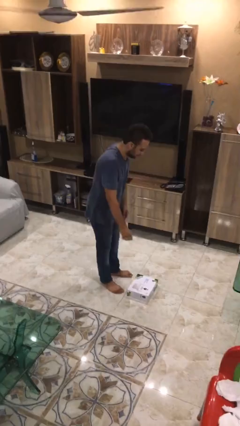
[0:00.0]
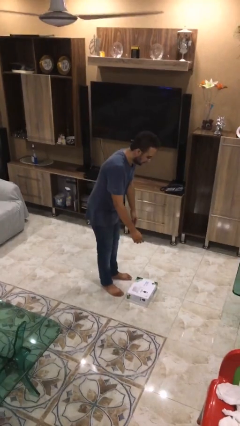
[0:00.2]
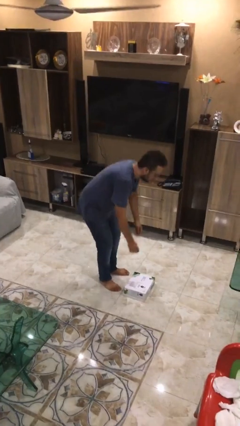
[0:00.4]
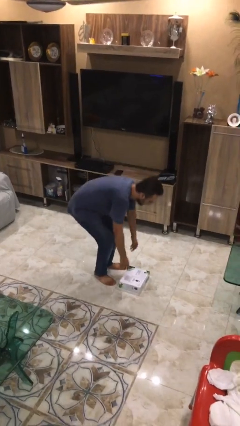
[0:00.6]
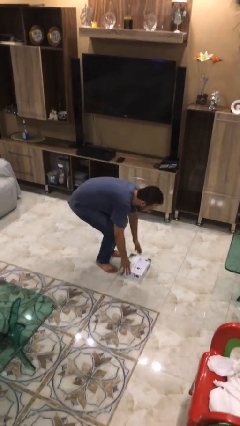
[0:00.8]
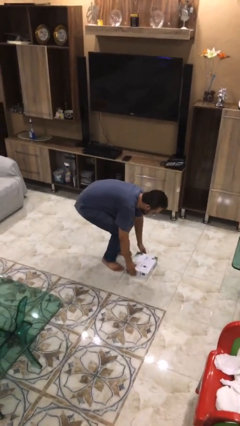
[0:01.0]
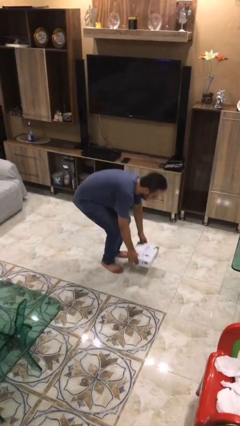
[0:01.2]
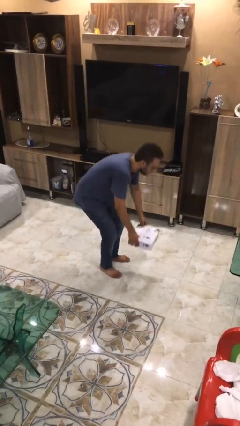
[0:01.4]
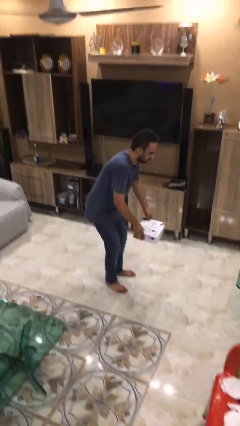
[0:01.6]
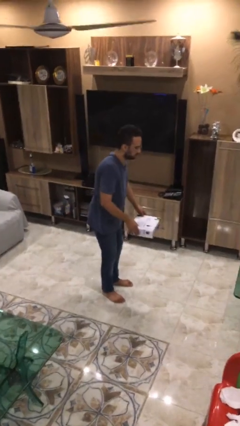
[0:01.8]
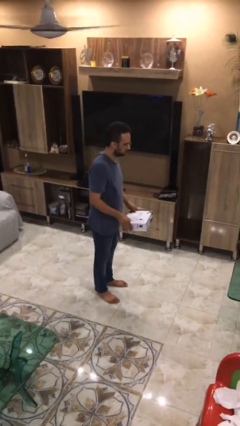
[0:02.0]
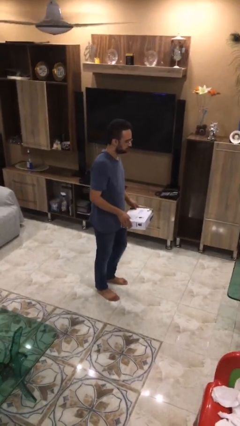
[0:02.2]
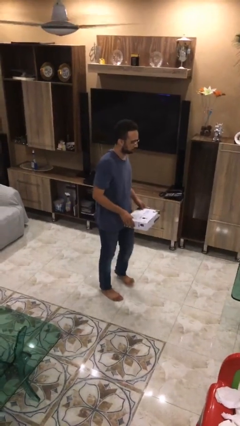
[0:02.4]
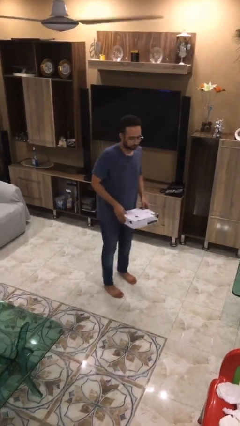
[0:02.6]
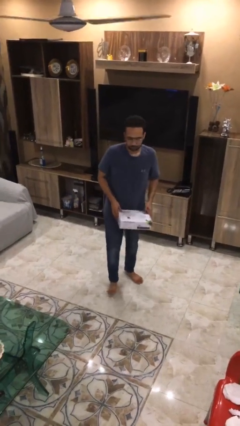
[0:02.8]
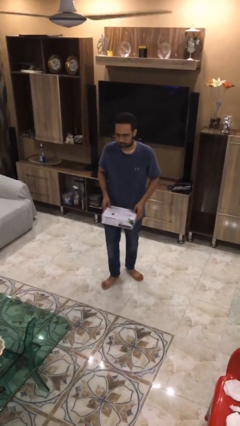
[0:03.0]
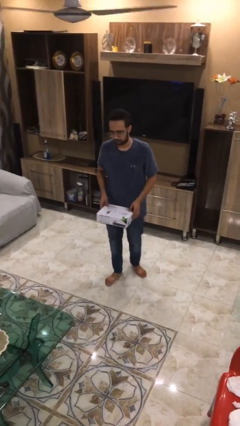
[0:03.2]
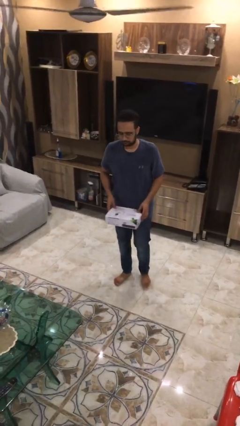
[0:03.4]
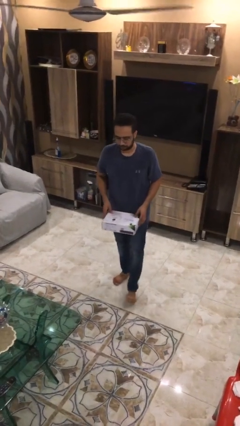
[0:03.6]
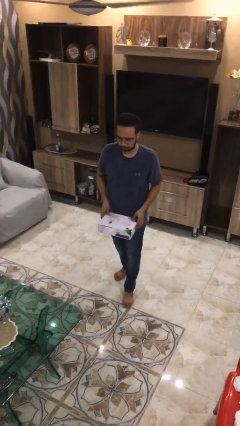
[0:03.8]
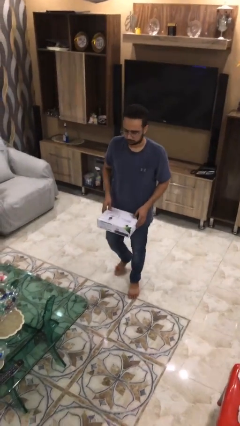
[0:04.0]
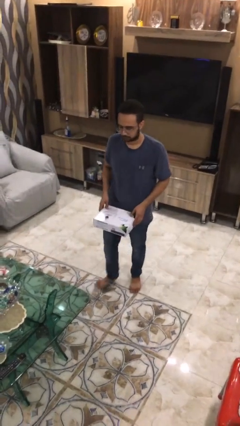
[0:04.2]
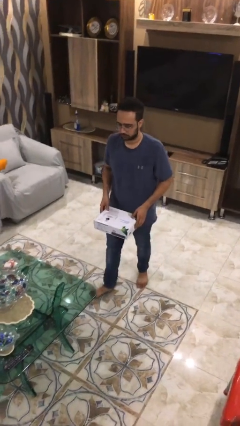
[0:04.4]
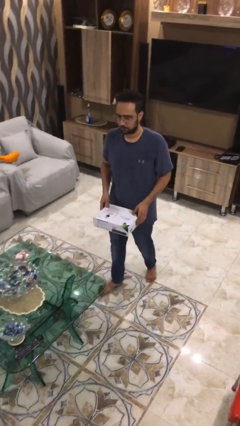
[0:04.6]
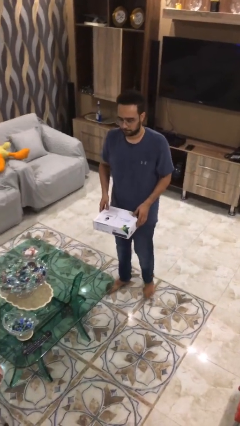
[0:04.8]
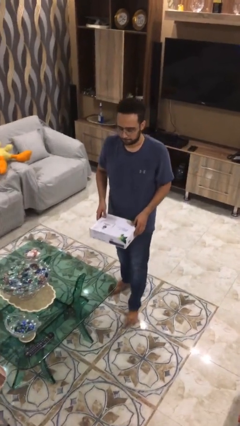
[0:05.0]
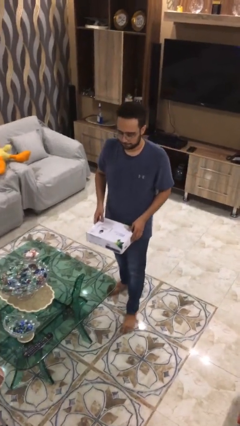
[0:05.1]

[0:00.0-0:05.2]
person picks up object from floor

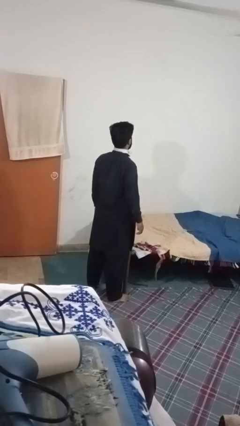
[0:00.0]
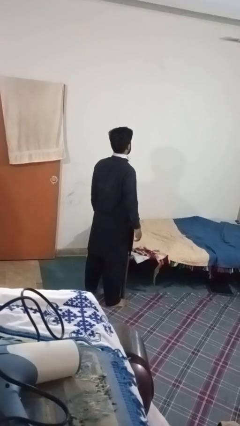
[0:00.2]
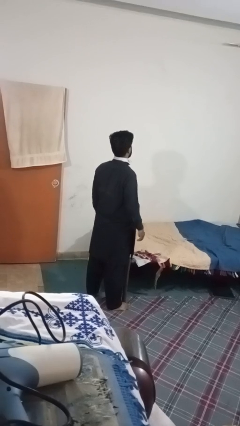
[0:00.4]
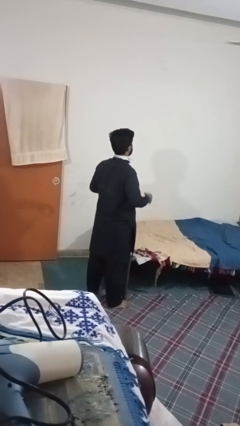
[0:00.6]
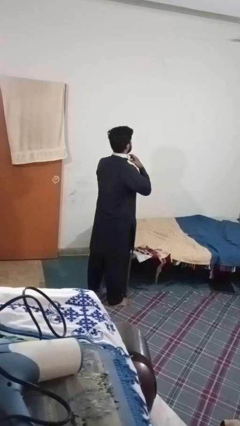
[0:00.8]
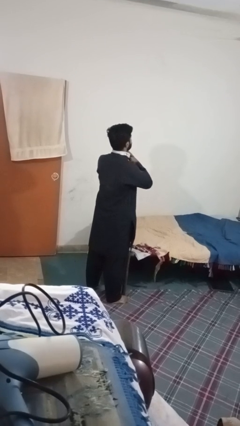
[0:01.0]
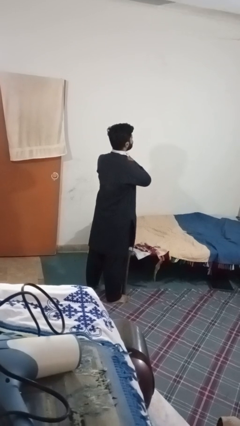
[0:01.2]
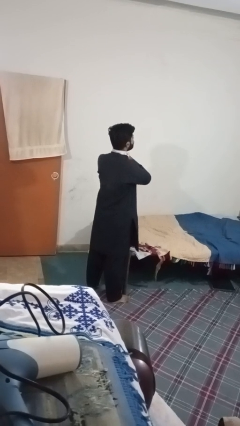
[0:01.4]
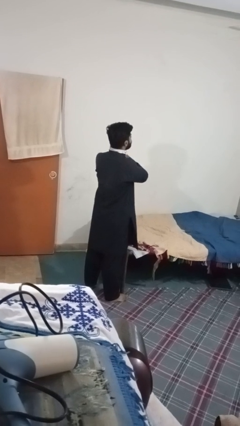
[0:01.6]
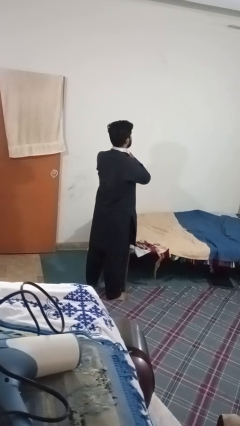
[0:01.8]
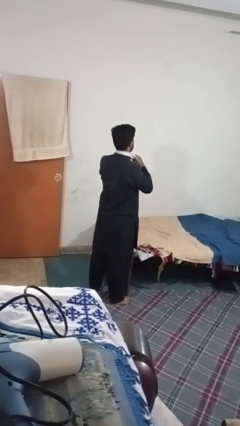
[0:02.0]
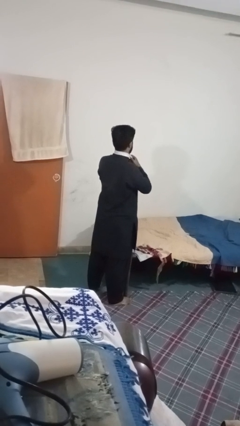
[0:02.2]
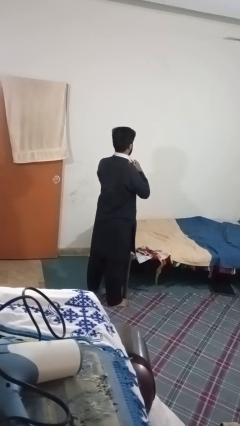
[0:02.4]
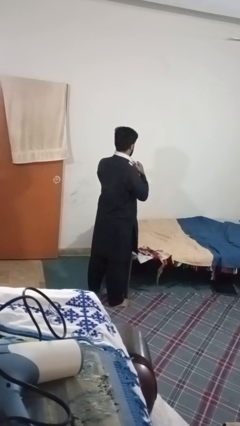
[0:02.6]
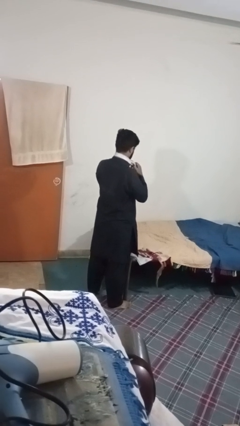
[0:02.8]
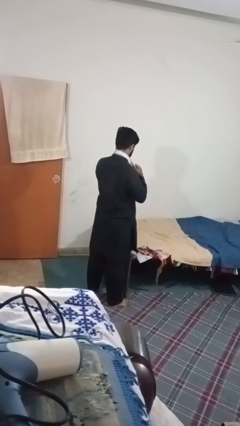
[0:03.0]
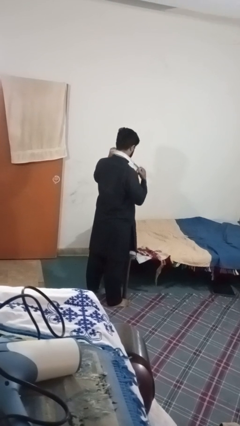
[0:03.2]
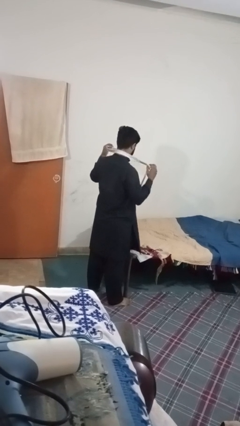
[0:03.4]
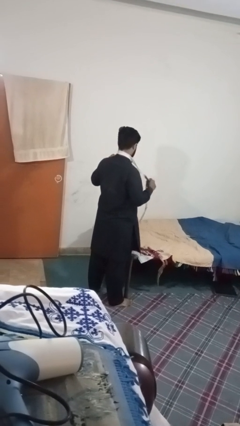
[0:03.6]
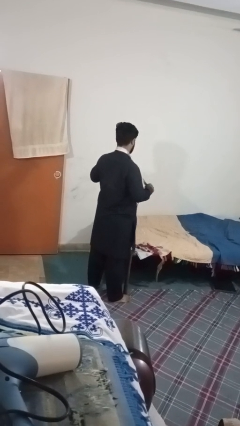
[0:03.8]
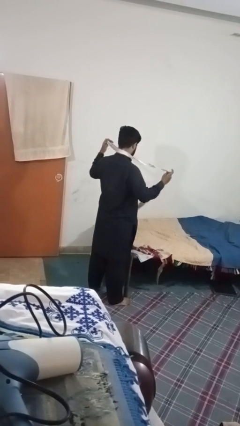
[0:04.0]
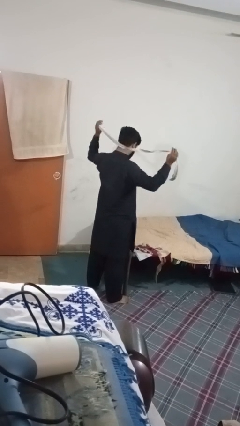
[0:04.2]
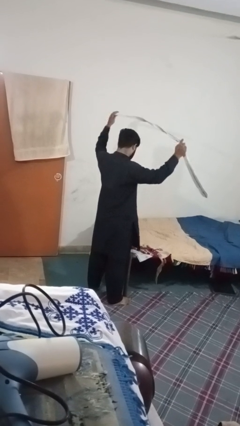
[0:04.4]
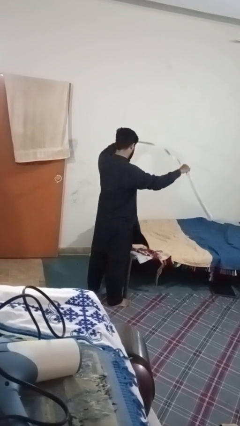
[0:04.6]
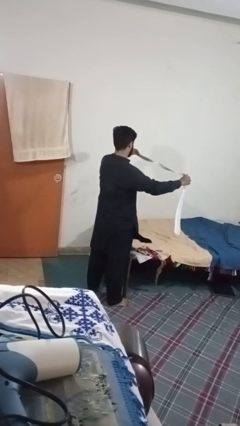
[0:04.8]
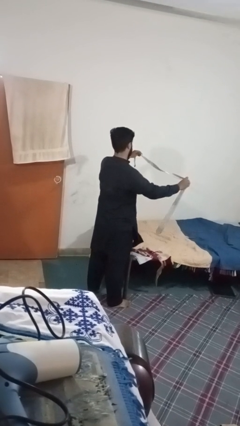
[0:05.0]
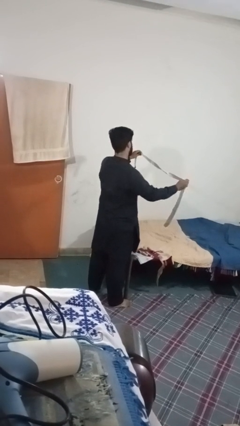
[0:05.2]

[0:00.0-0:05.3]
person takes off necktie

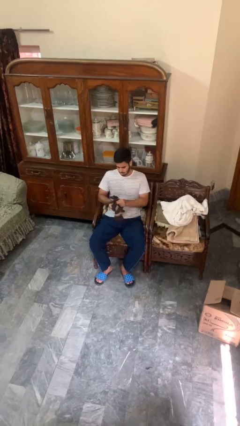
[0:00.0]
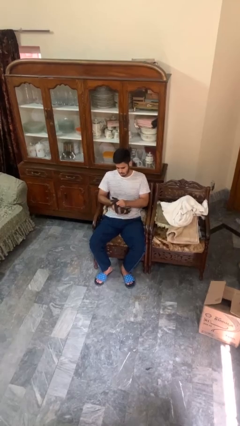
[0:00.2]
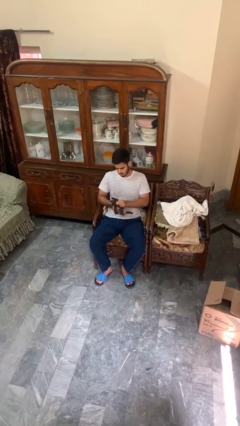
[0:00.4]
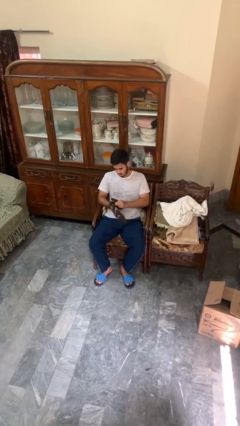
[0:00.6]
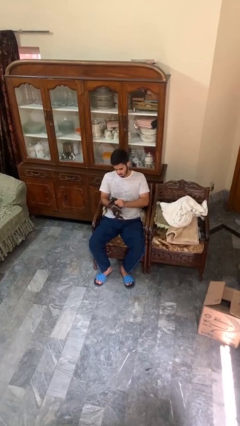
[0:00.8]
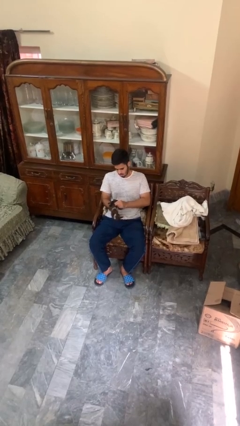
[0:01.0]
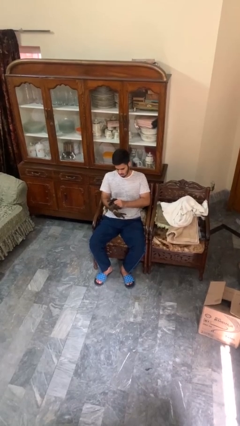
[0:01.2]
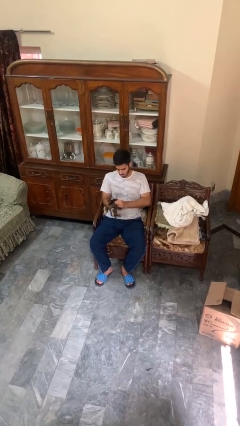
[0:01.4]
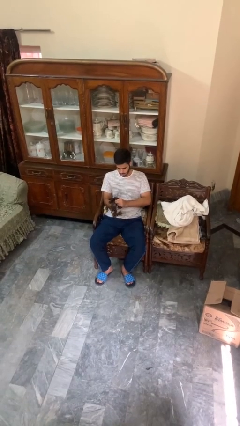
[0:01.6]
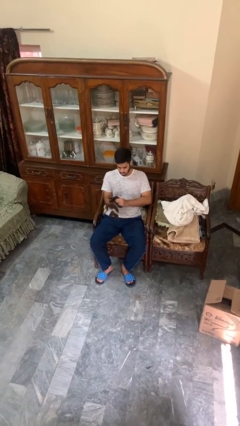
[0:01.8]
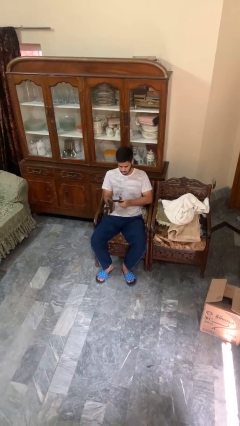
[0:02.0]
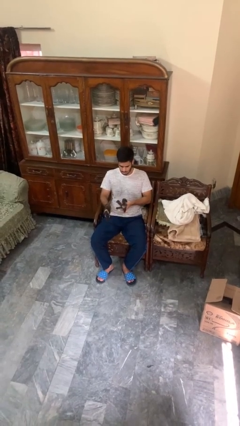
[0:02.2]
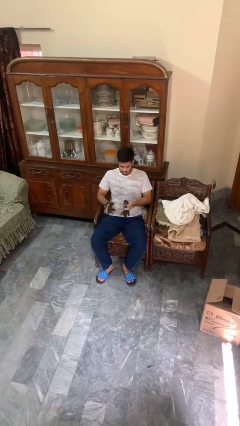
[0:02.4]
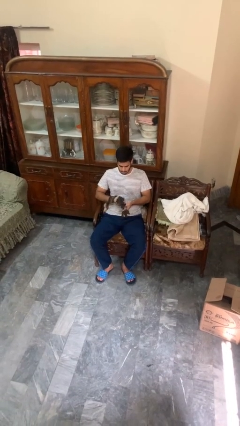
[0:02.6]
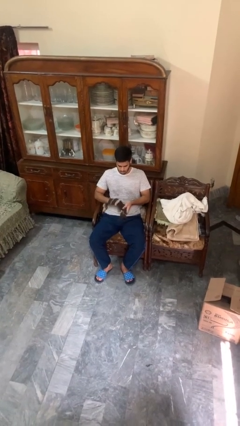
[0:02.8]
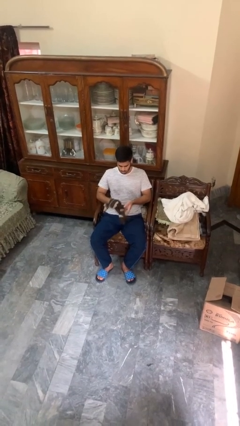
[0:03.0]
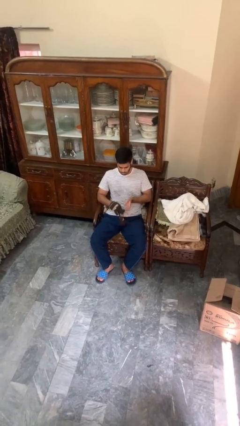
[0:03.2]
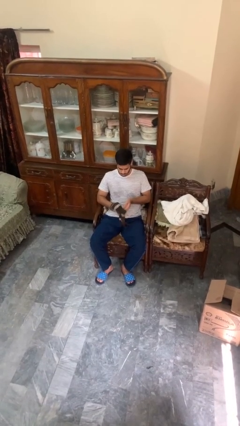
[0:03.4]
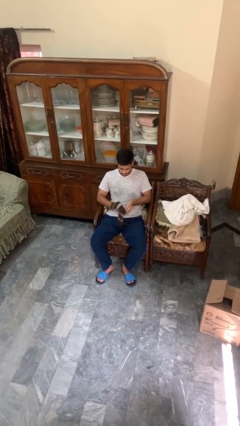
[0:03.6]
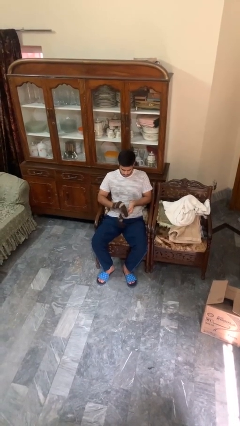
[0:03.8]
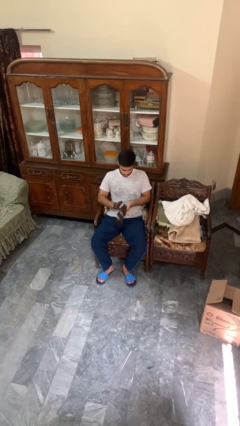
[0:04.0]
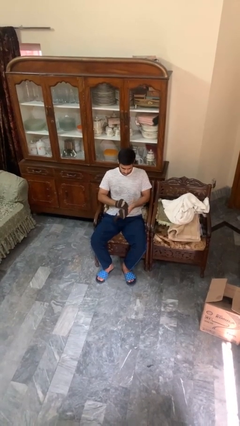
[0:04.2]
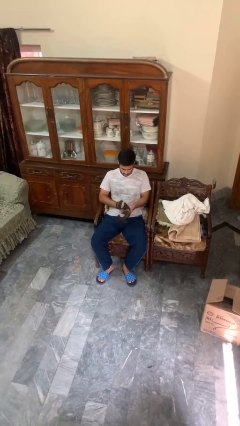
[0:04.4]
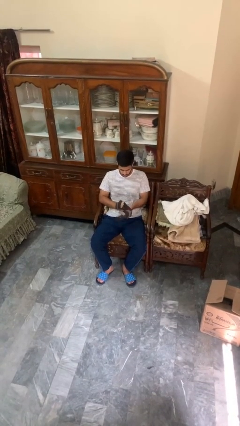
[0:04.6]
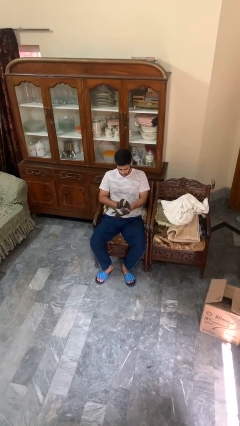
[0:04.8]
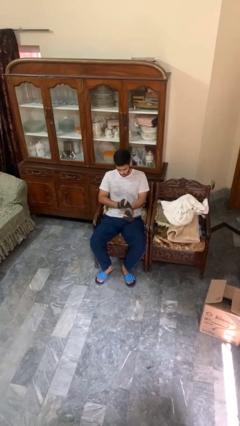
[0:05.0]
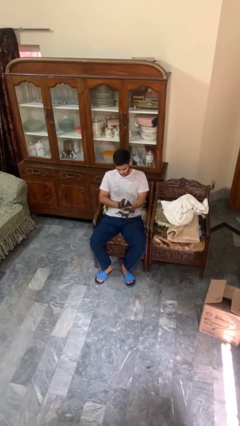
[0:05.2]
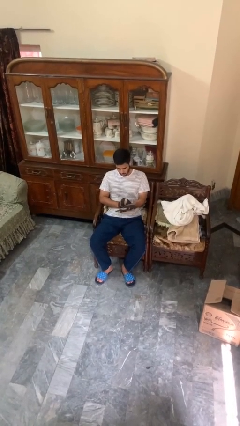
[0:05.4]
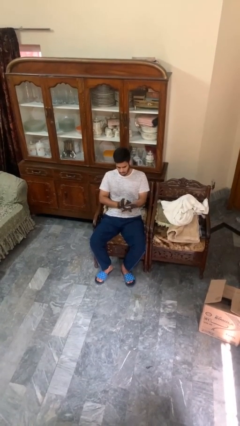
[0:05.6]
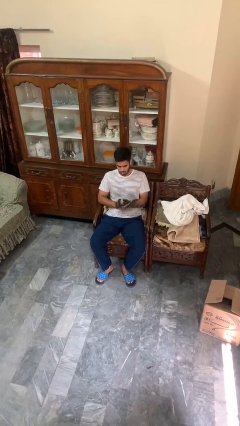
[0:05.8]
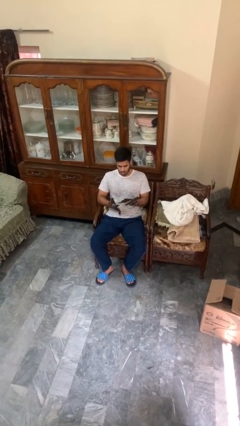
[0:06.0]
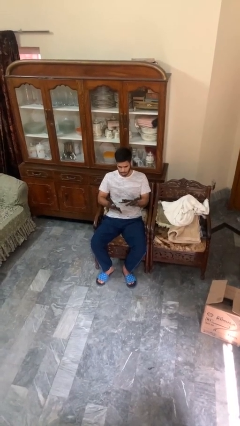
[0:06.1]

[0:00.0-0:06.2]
person puts on gloves

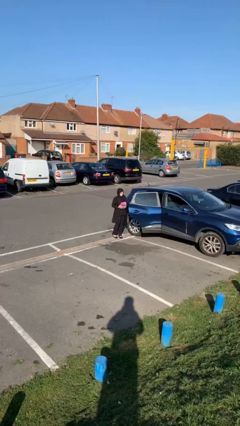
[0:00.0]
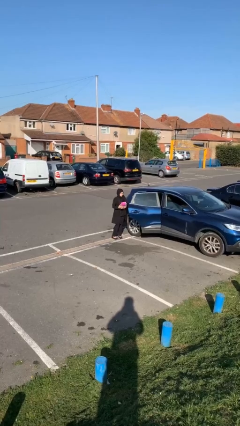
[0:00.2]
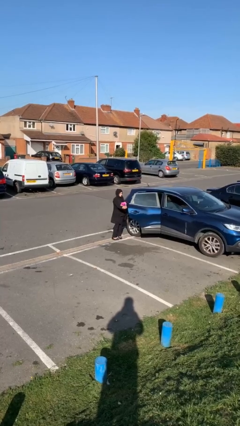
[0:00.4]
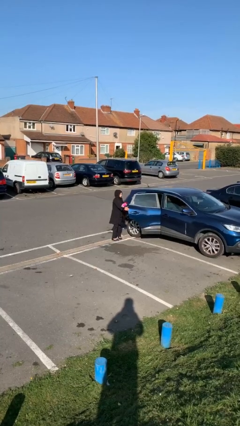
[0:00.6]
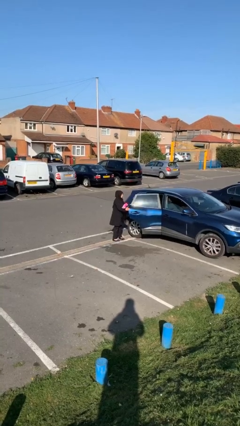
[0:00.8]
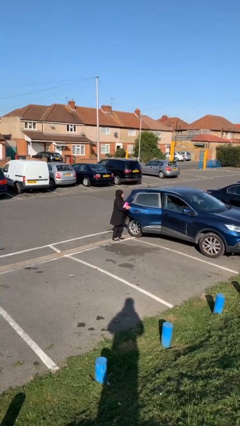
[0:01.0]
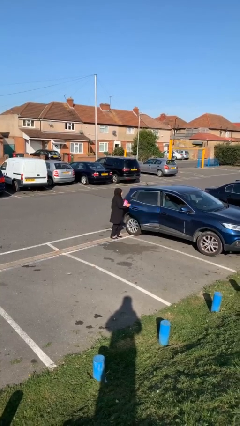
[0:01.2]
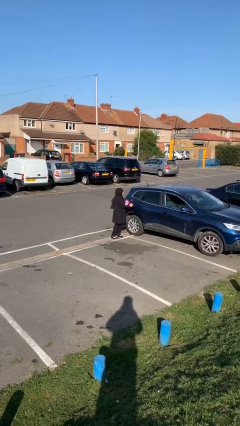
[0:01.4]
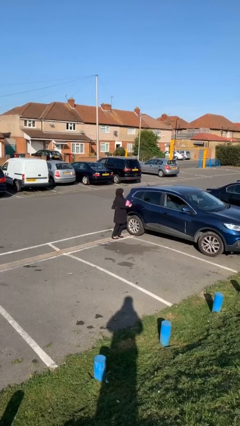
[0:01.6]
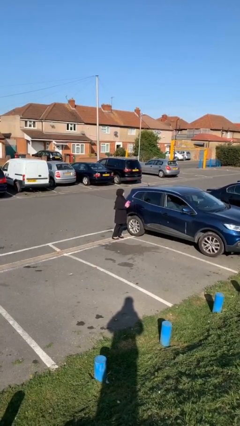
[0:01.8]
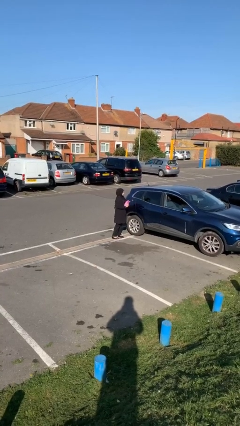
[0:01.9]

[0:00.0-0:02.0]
person closes car door
